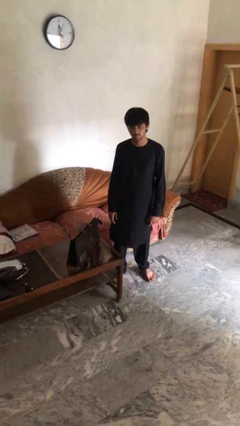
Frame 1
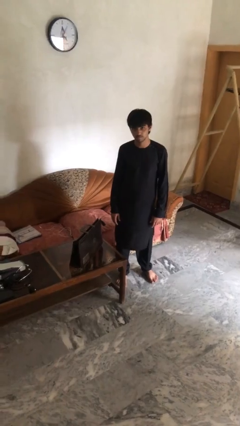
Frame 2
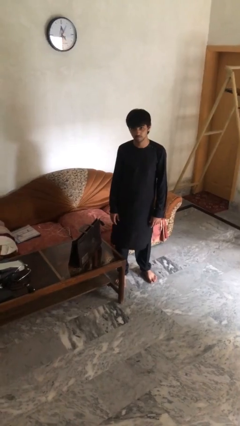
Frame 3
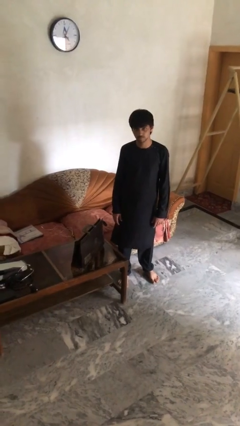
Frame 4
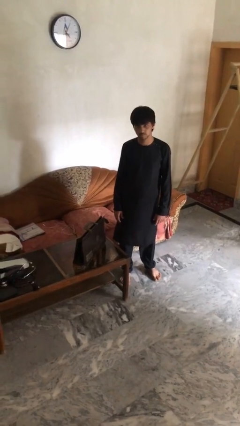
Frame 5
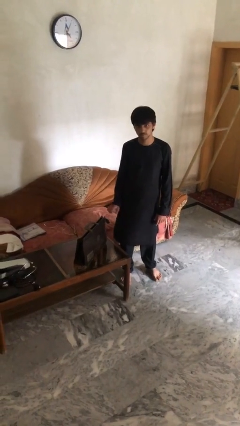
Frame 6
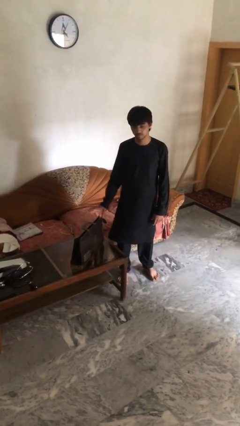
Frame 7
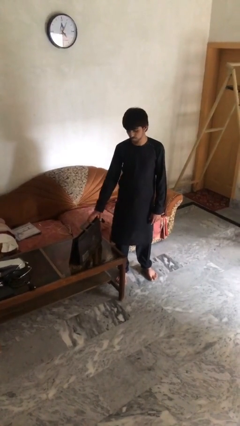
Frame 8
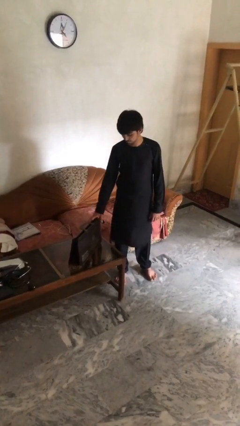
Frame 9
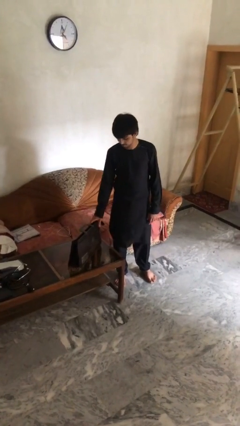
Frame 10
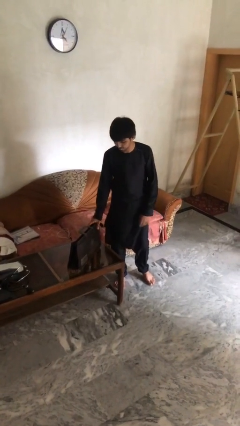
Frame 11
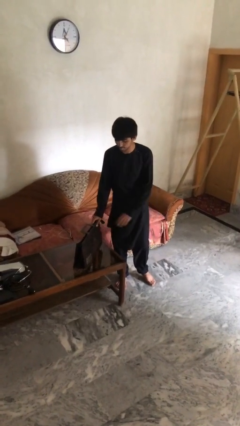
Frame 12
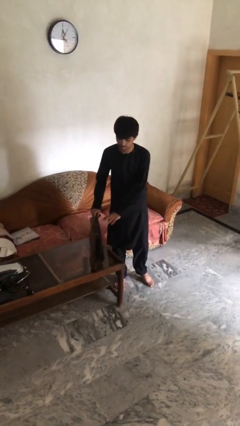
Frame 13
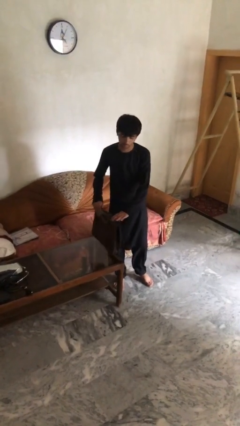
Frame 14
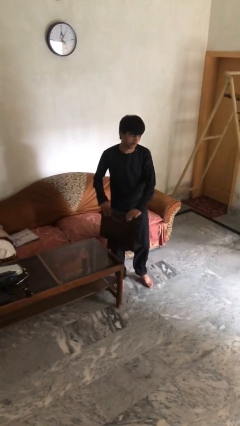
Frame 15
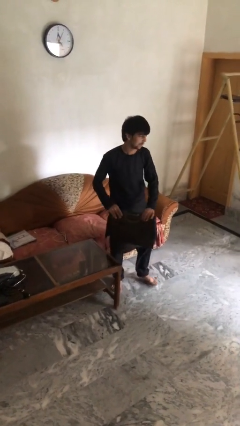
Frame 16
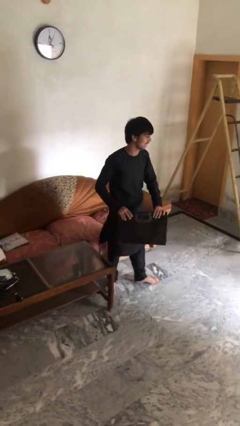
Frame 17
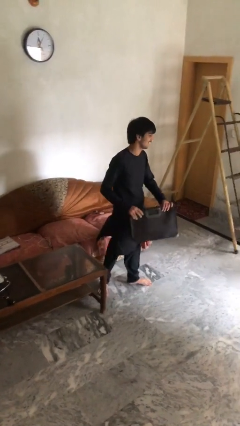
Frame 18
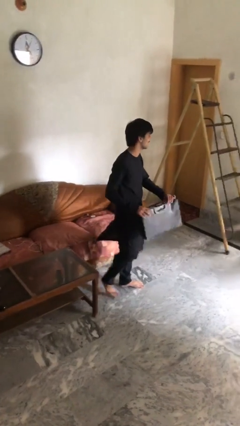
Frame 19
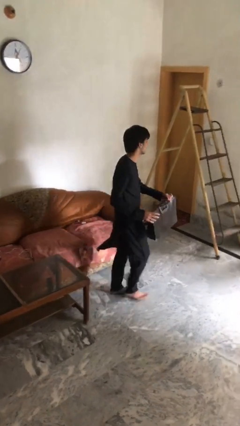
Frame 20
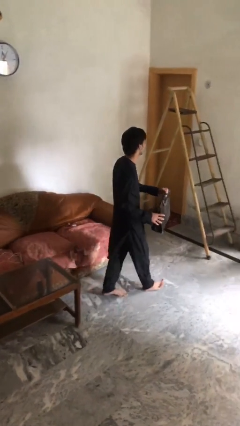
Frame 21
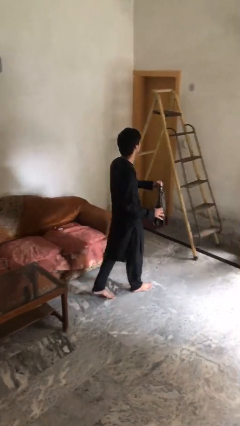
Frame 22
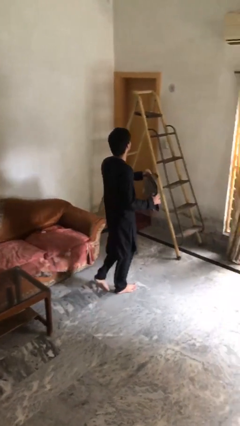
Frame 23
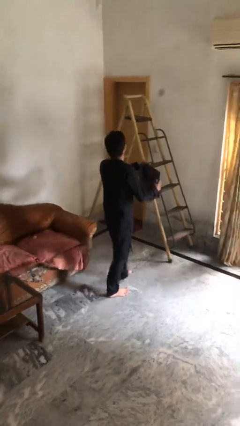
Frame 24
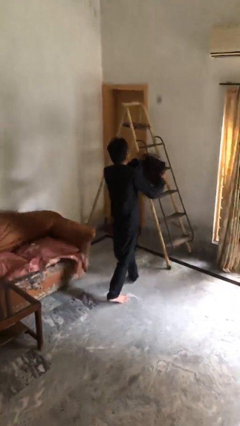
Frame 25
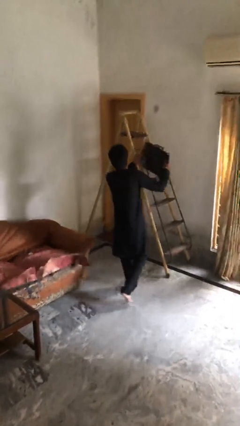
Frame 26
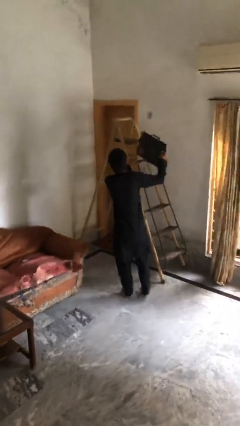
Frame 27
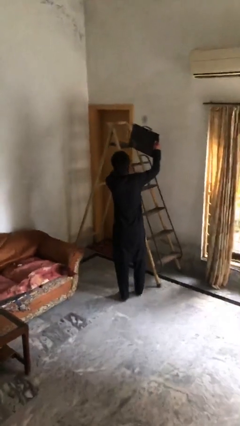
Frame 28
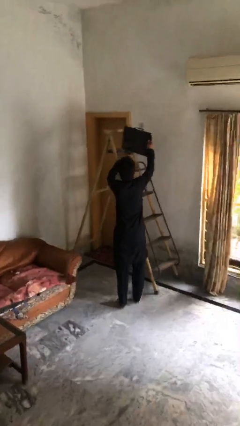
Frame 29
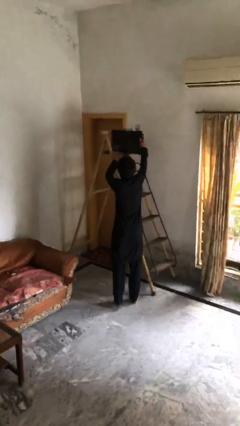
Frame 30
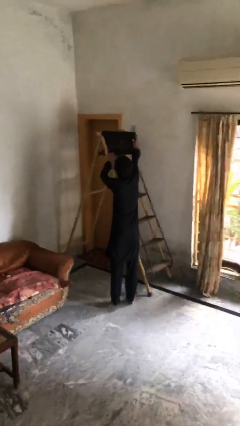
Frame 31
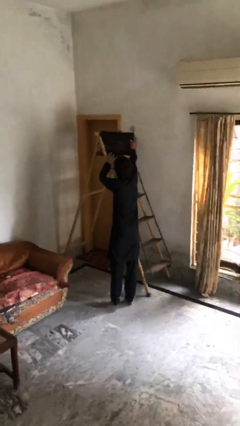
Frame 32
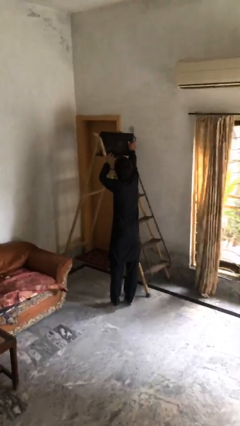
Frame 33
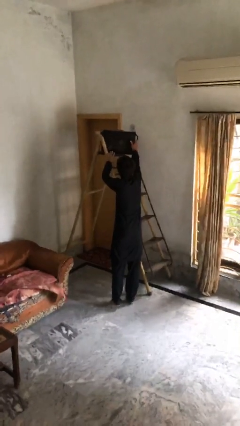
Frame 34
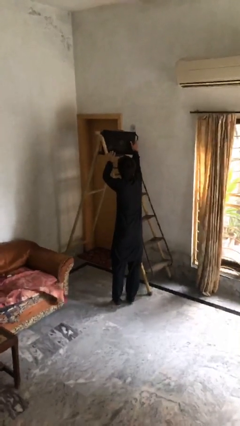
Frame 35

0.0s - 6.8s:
person picks up object from table

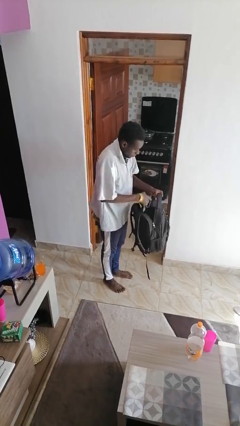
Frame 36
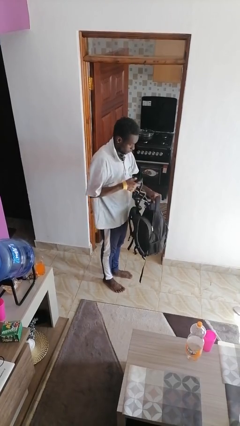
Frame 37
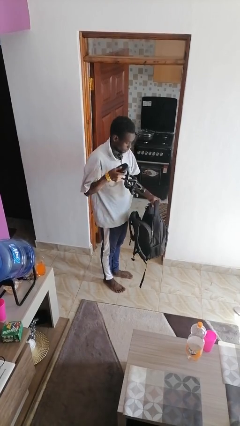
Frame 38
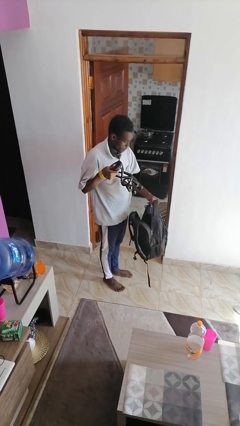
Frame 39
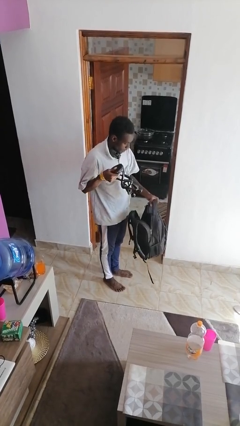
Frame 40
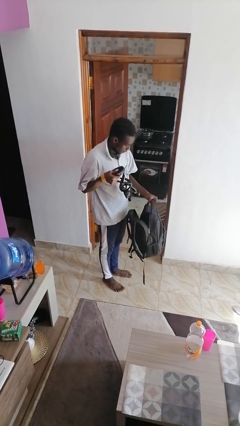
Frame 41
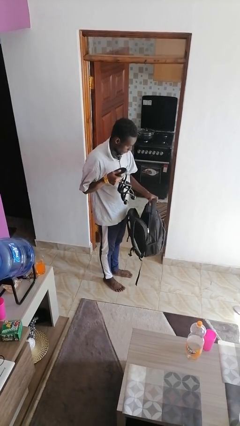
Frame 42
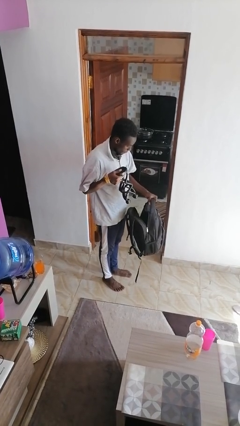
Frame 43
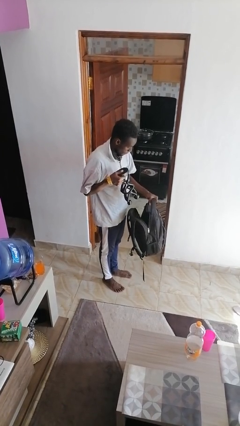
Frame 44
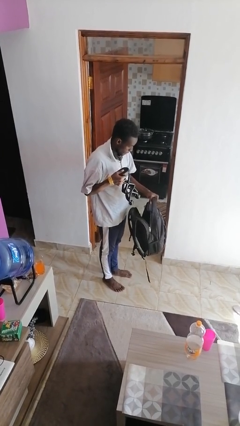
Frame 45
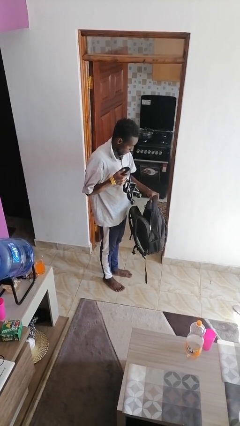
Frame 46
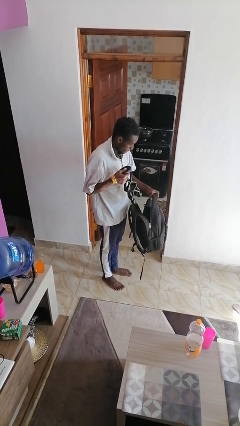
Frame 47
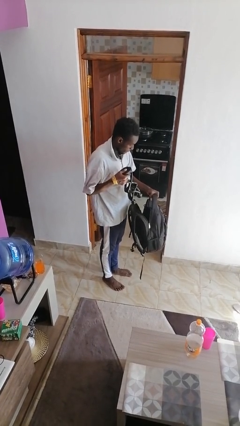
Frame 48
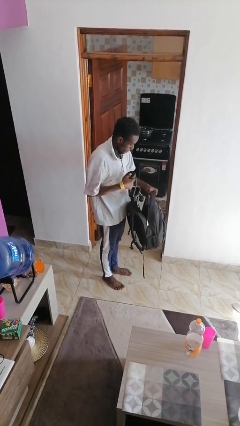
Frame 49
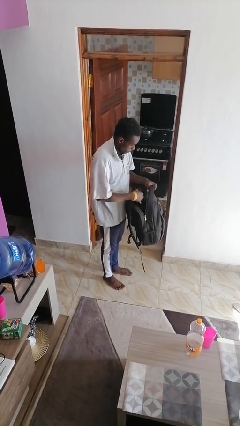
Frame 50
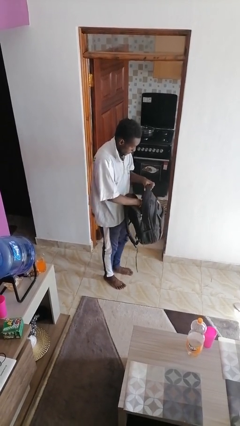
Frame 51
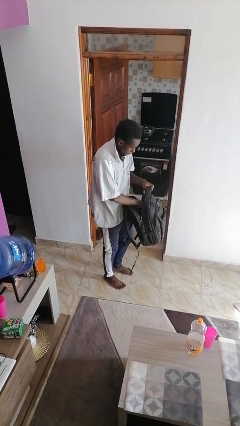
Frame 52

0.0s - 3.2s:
person takes object from backpack

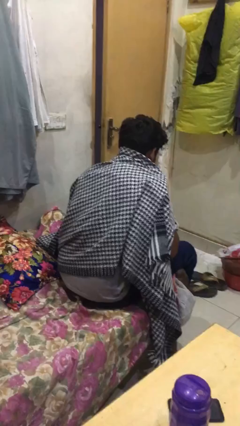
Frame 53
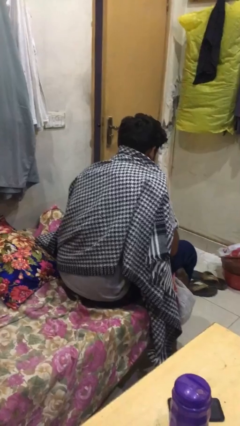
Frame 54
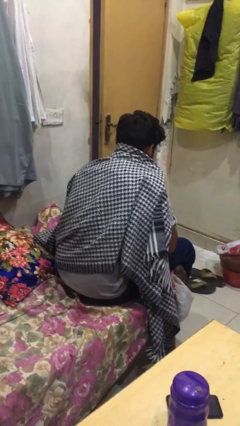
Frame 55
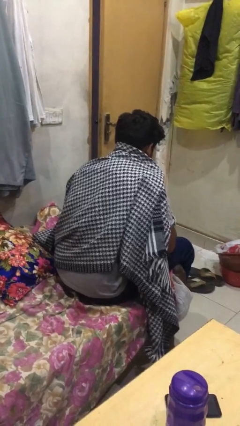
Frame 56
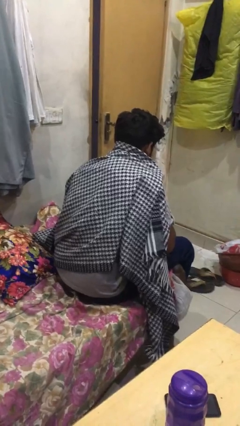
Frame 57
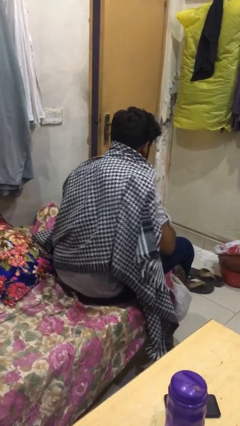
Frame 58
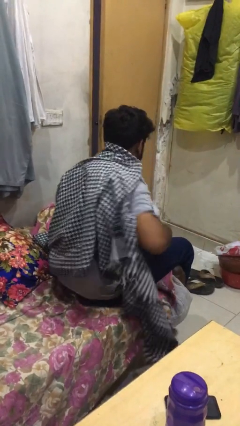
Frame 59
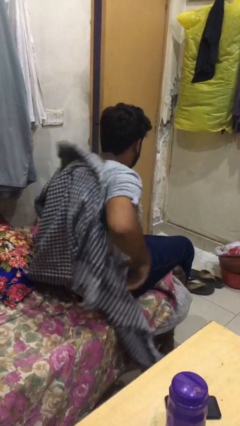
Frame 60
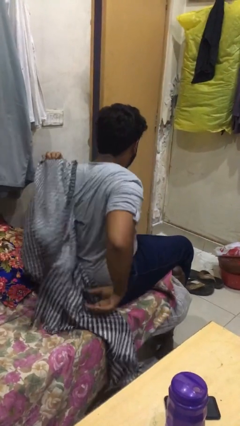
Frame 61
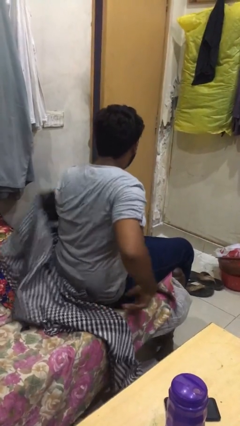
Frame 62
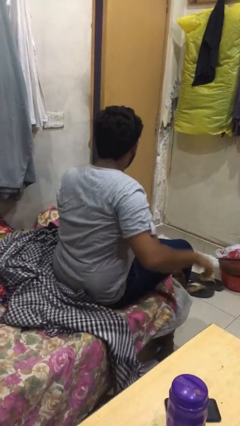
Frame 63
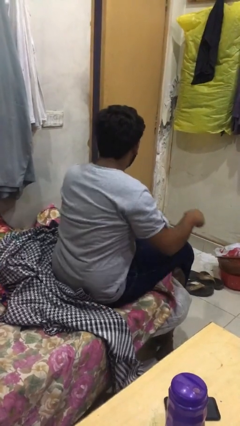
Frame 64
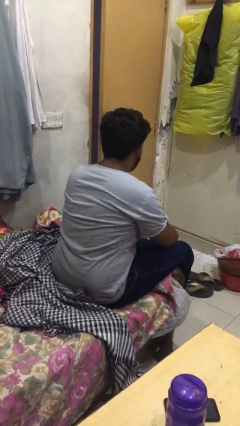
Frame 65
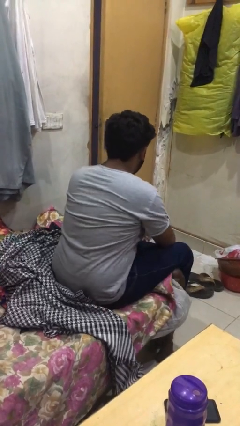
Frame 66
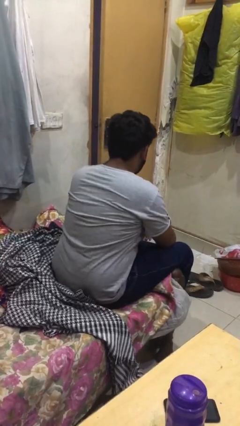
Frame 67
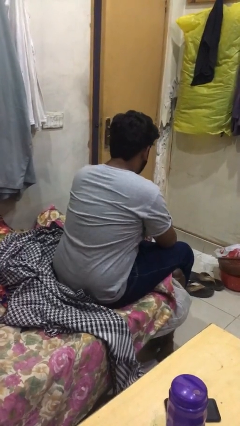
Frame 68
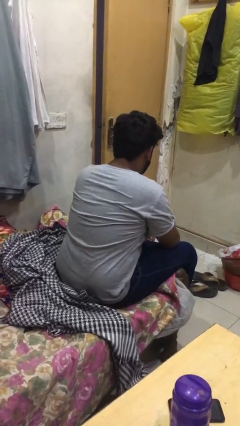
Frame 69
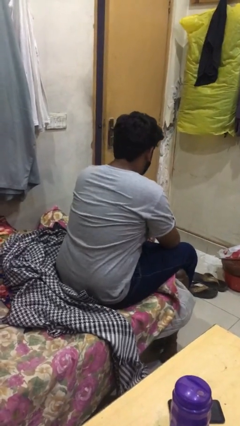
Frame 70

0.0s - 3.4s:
person uncovers with blanket

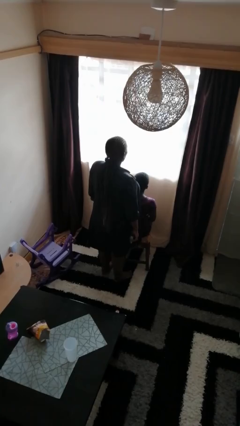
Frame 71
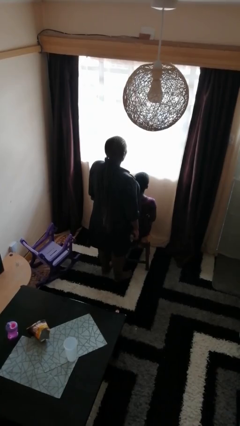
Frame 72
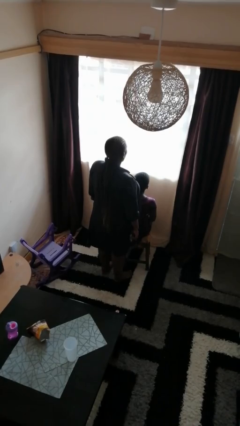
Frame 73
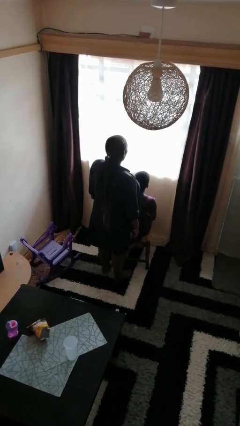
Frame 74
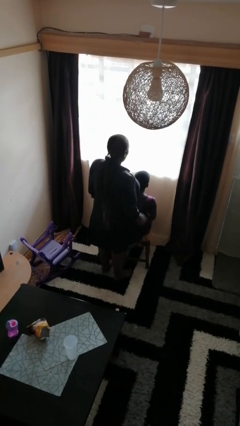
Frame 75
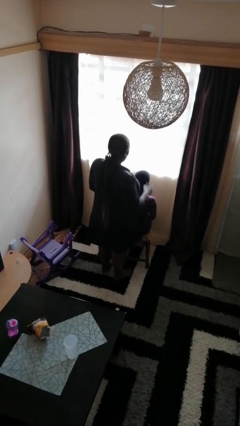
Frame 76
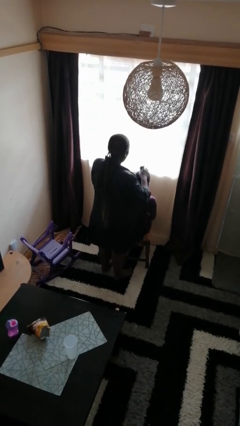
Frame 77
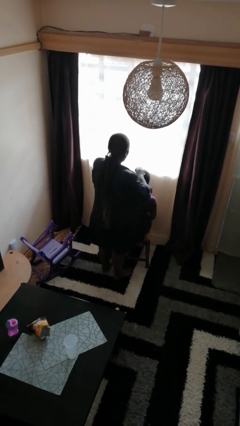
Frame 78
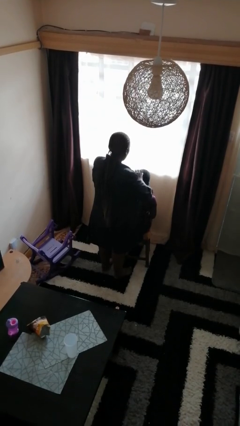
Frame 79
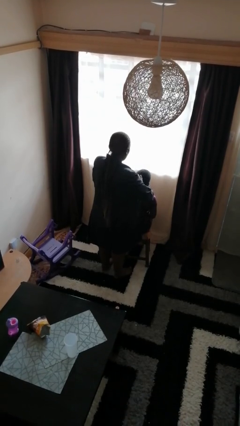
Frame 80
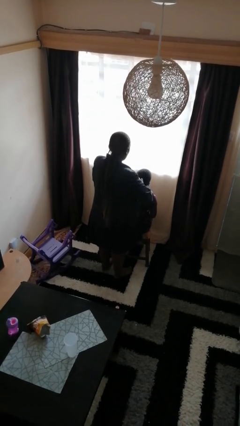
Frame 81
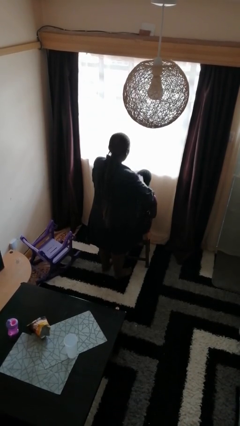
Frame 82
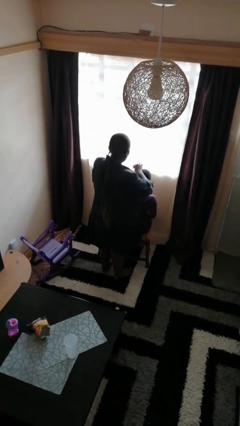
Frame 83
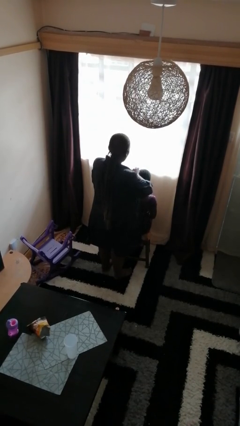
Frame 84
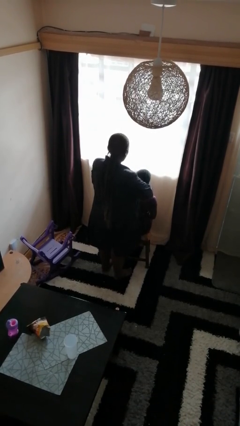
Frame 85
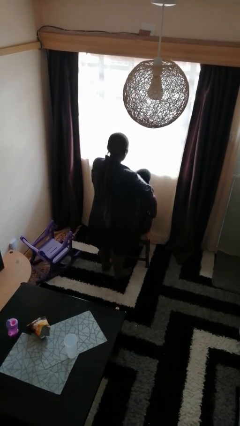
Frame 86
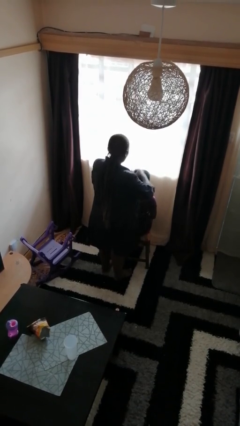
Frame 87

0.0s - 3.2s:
person brushes hair of person

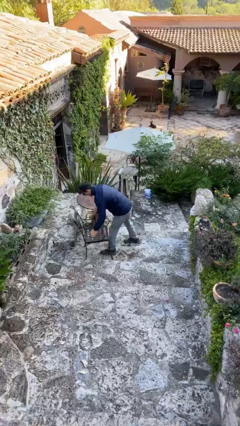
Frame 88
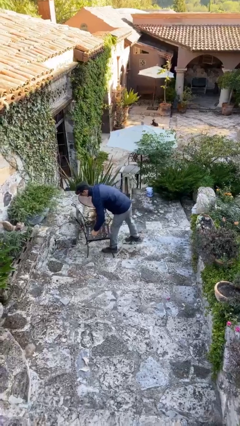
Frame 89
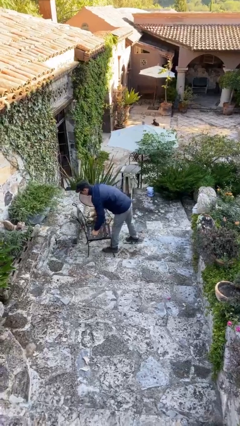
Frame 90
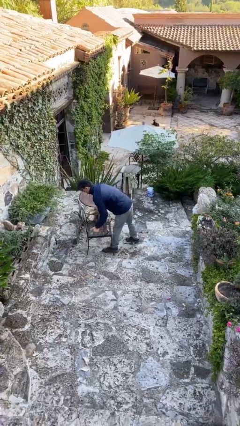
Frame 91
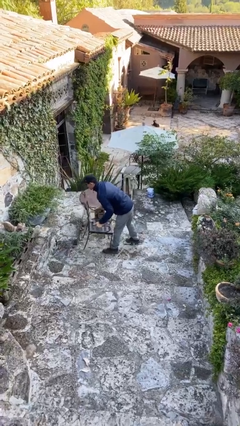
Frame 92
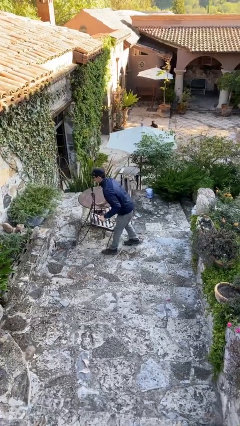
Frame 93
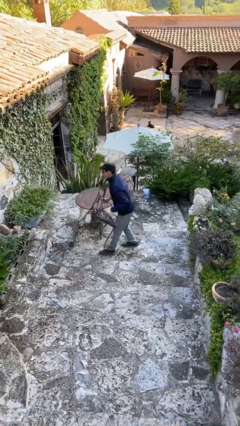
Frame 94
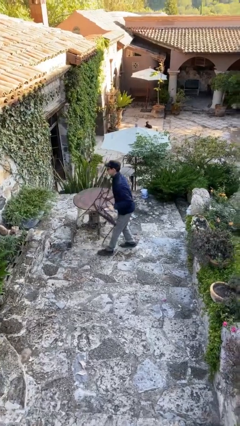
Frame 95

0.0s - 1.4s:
person picks up object from floor
